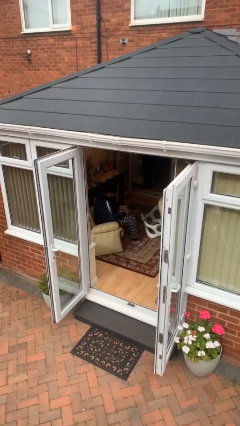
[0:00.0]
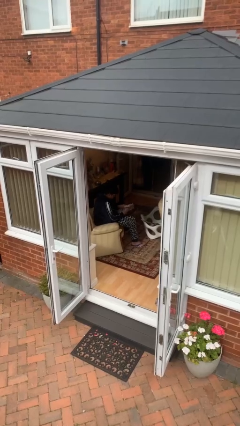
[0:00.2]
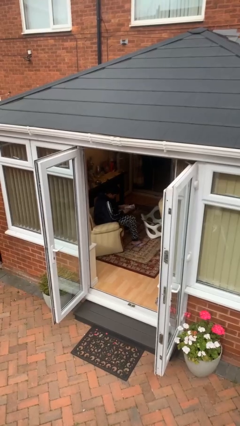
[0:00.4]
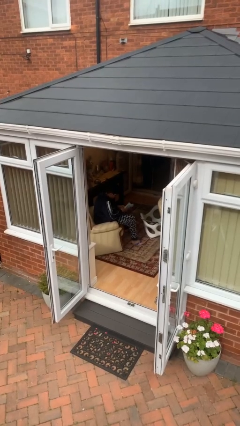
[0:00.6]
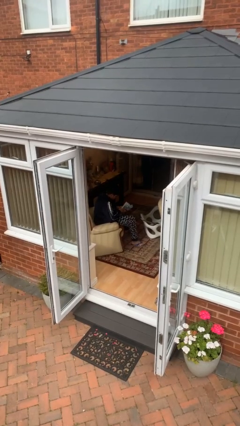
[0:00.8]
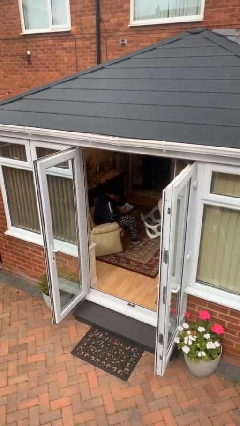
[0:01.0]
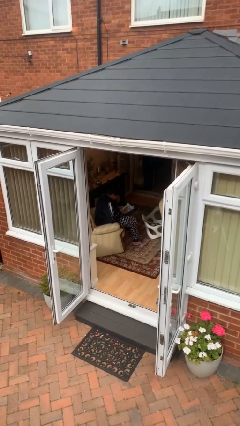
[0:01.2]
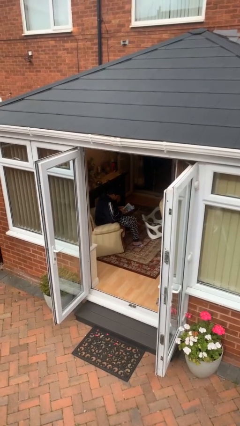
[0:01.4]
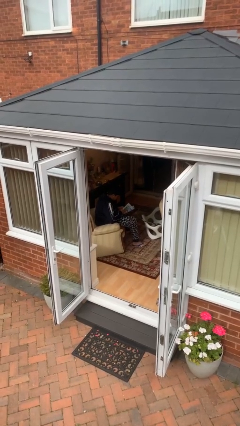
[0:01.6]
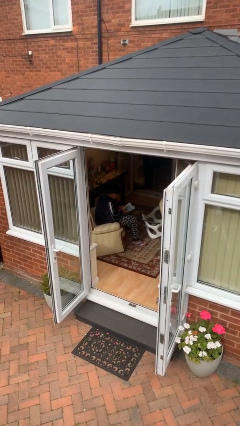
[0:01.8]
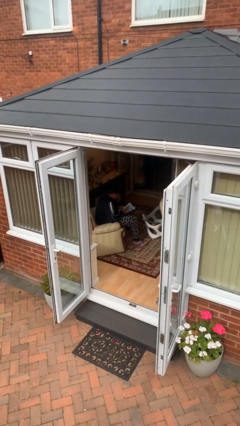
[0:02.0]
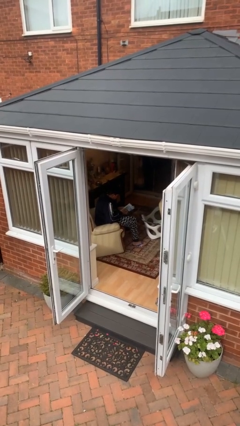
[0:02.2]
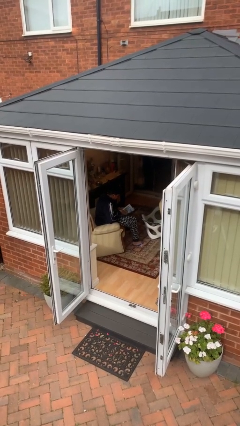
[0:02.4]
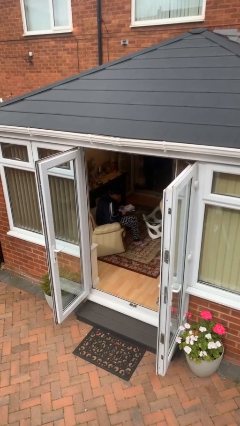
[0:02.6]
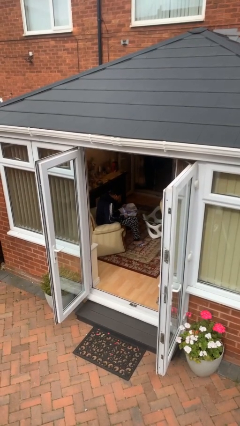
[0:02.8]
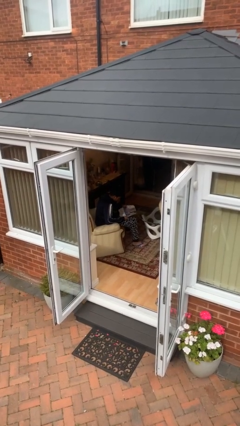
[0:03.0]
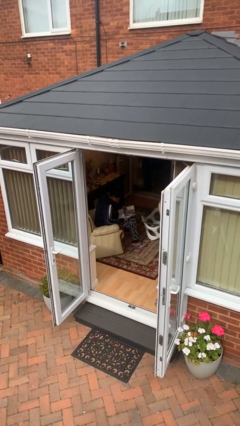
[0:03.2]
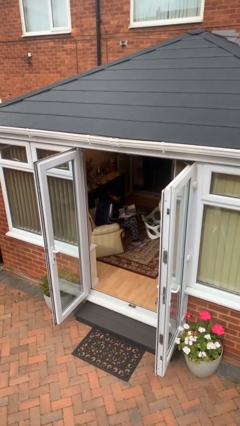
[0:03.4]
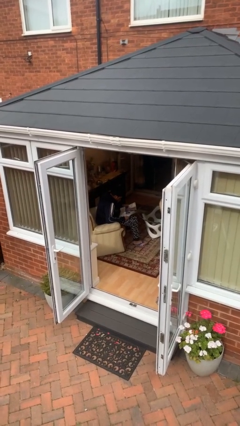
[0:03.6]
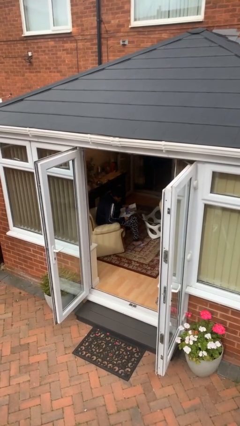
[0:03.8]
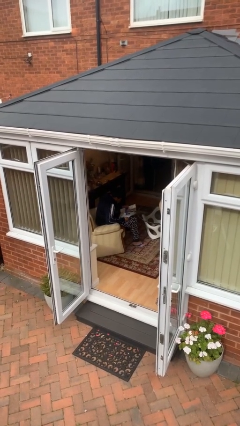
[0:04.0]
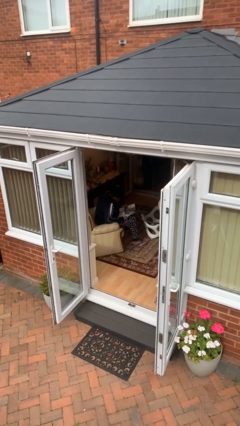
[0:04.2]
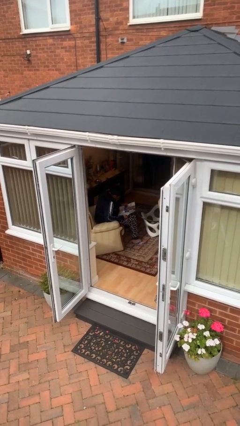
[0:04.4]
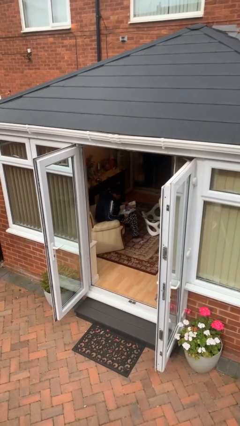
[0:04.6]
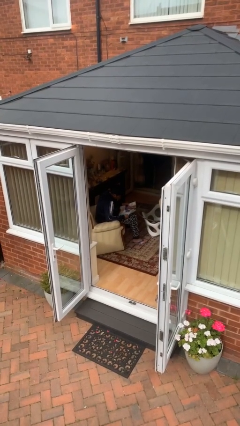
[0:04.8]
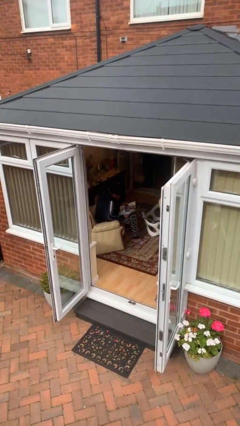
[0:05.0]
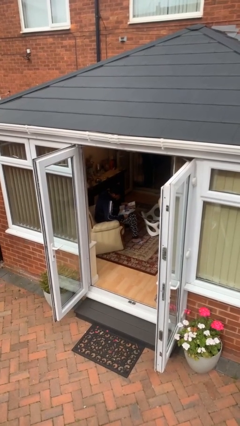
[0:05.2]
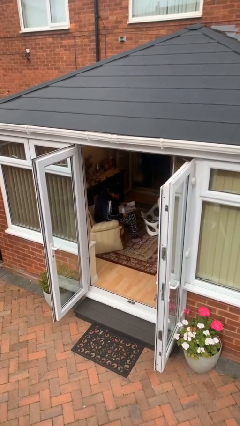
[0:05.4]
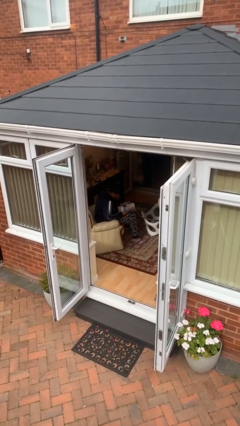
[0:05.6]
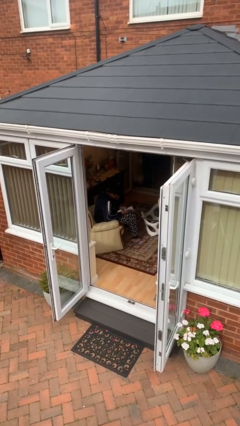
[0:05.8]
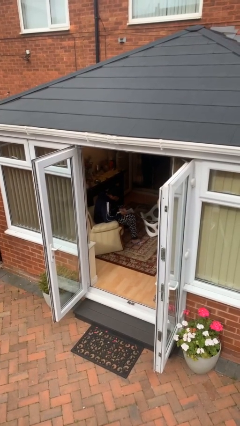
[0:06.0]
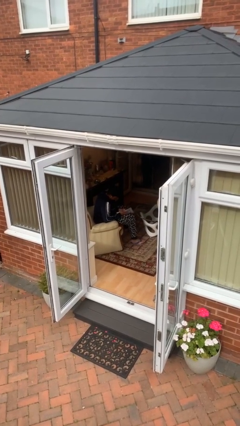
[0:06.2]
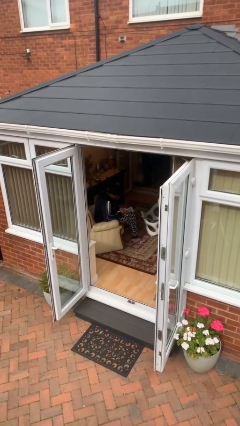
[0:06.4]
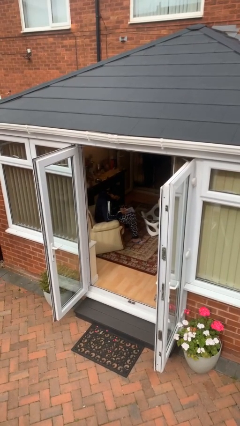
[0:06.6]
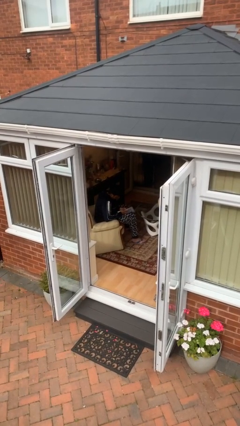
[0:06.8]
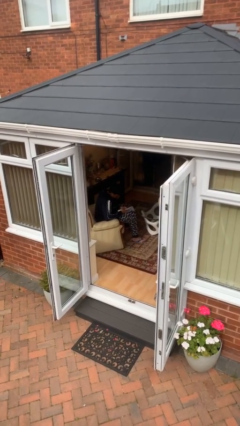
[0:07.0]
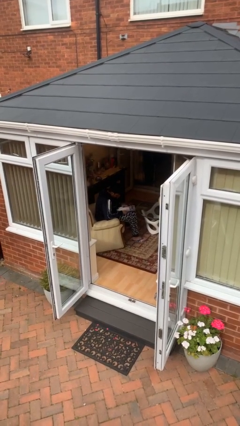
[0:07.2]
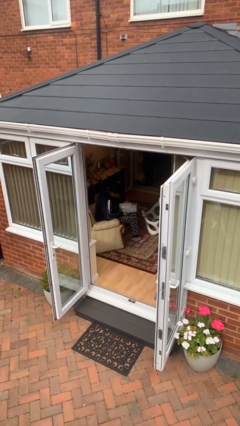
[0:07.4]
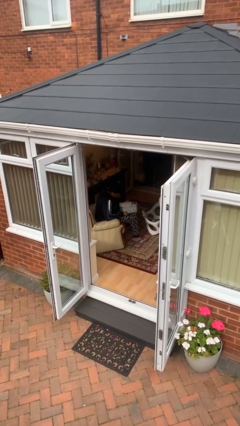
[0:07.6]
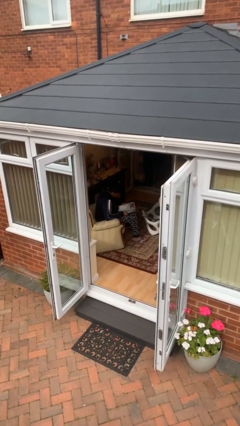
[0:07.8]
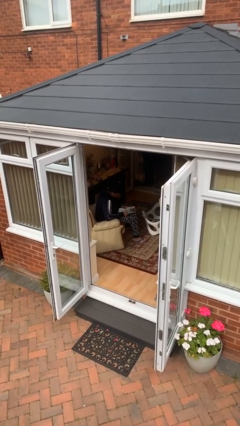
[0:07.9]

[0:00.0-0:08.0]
person reads document

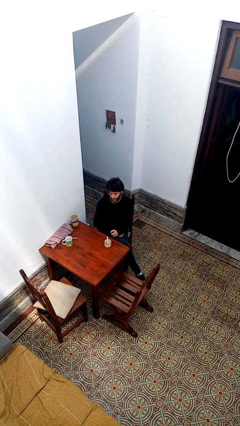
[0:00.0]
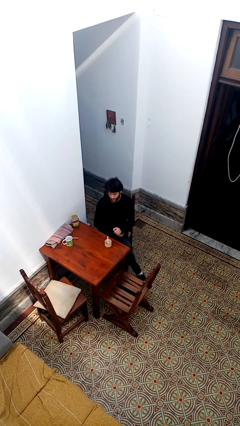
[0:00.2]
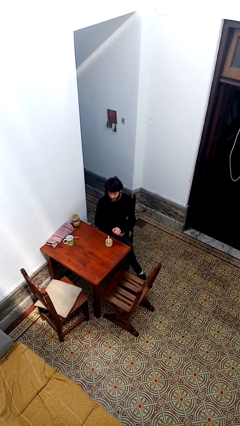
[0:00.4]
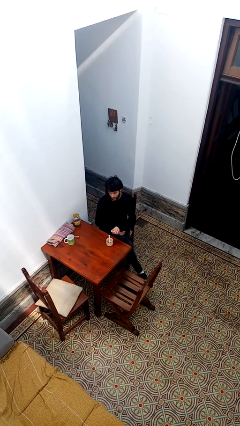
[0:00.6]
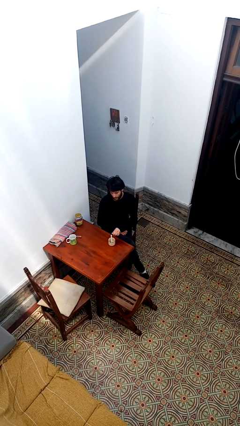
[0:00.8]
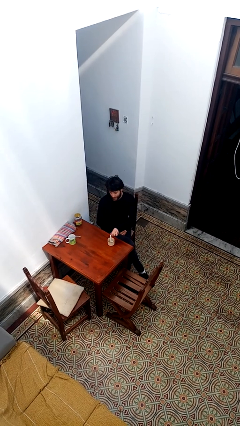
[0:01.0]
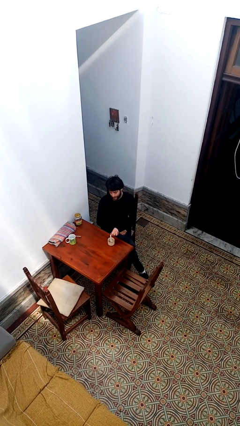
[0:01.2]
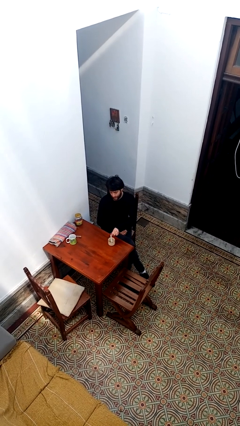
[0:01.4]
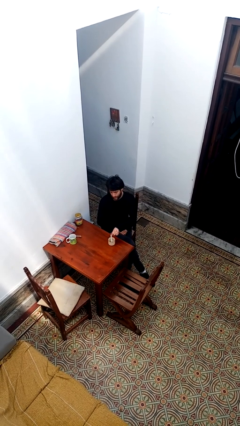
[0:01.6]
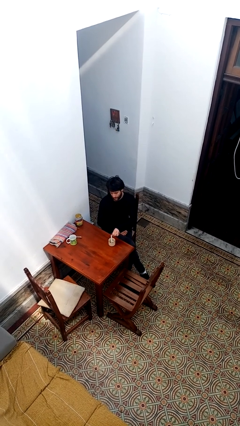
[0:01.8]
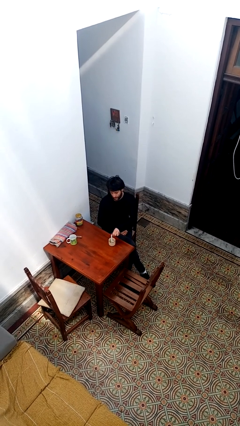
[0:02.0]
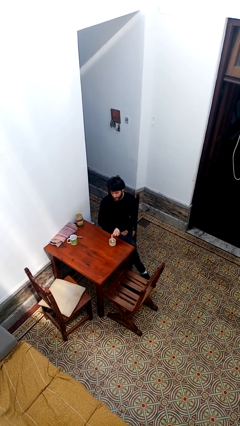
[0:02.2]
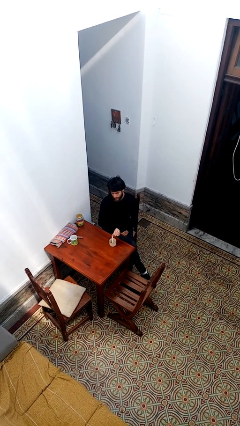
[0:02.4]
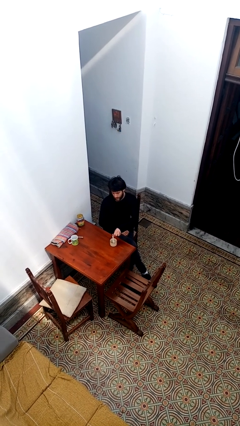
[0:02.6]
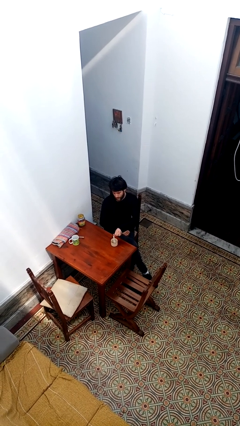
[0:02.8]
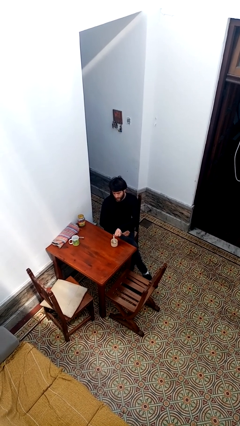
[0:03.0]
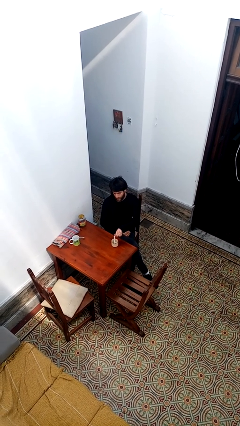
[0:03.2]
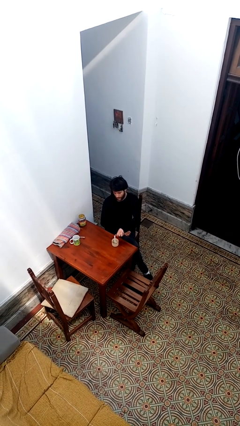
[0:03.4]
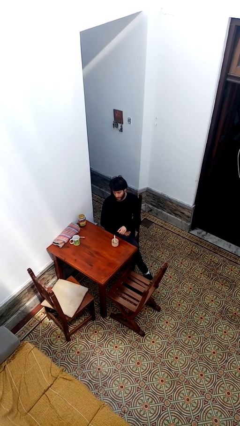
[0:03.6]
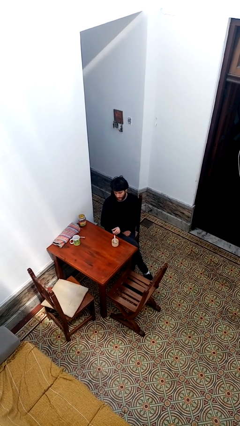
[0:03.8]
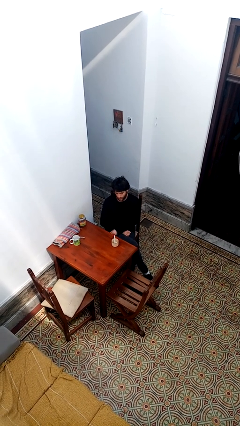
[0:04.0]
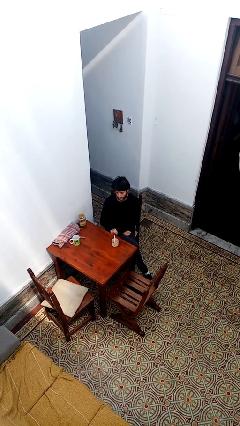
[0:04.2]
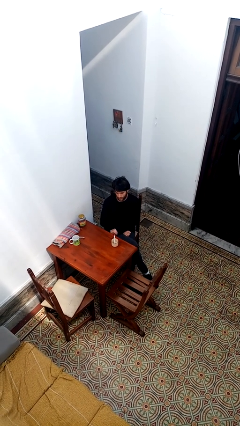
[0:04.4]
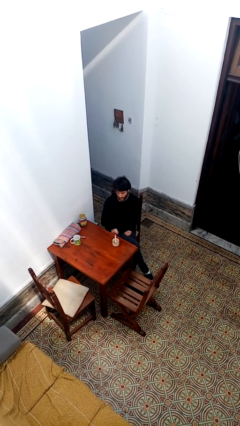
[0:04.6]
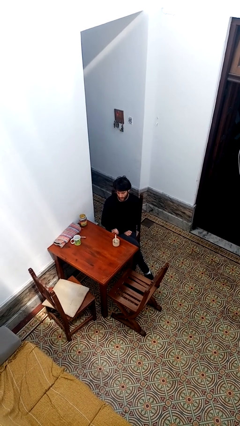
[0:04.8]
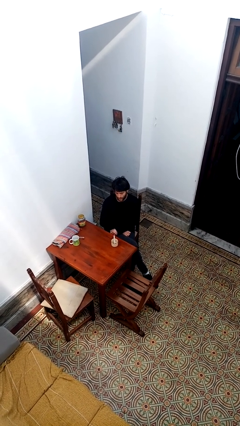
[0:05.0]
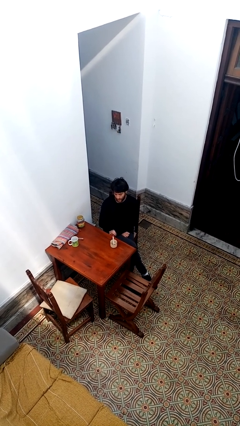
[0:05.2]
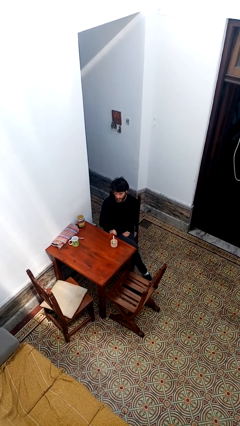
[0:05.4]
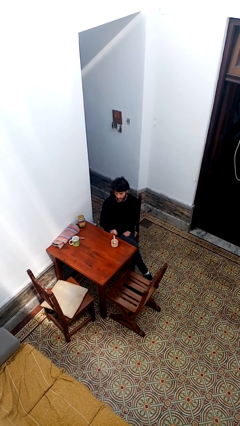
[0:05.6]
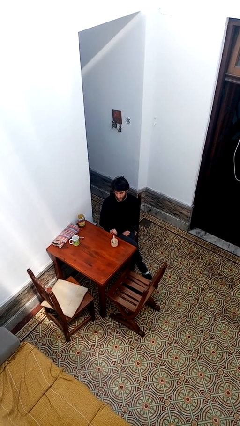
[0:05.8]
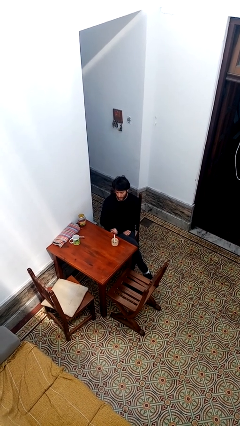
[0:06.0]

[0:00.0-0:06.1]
person lights candle

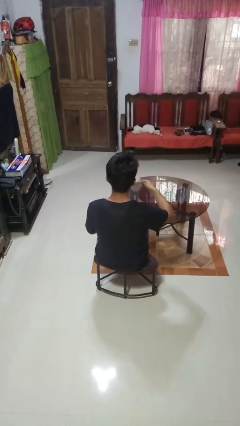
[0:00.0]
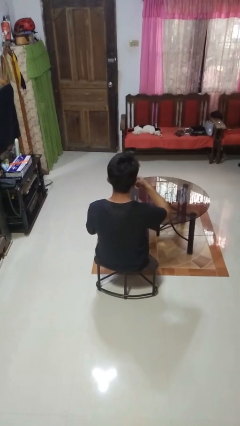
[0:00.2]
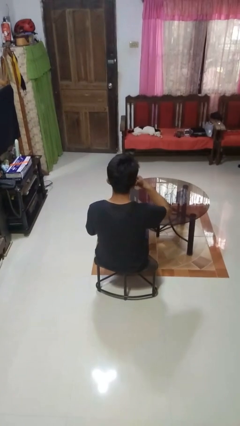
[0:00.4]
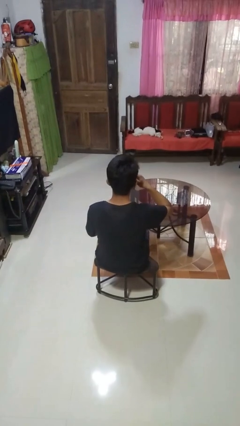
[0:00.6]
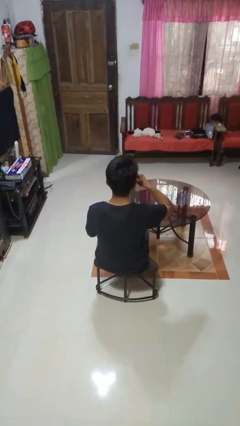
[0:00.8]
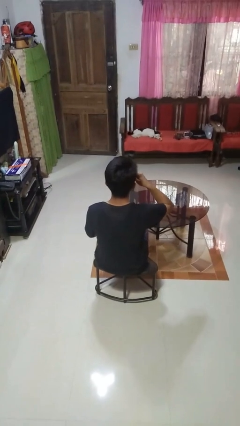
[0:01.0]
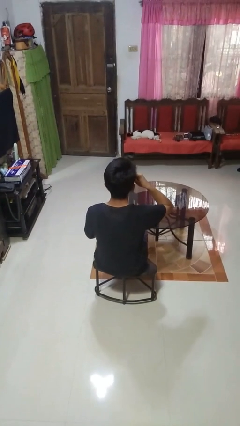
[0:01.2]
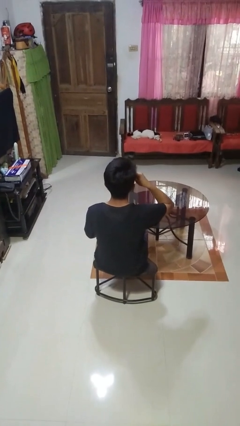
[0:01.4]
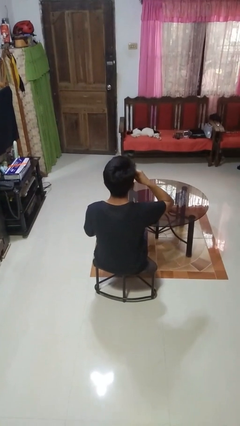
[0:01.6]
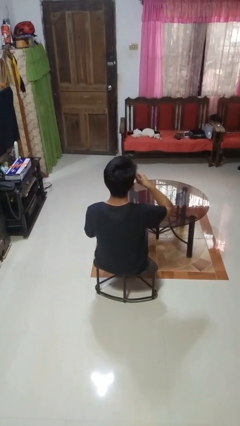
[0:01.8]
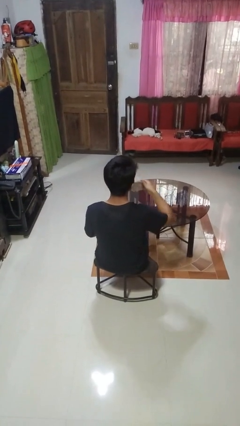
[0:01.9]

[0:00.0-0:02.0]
person drinks from mug

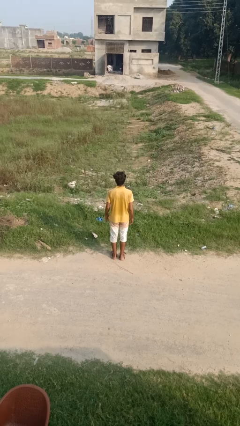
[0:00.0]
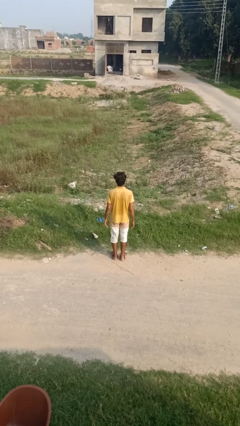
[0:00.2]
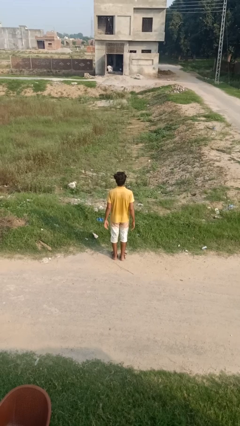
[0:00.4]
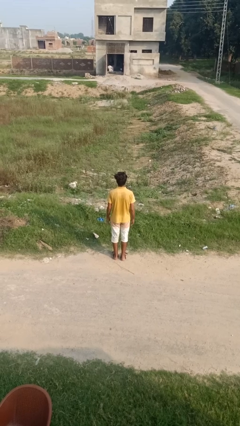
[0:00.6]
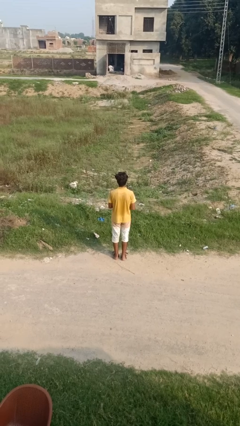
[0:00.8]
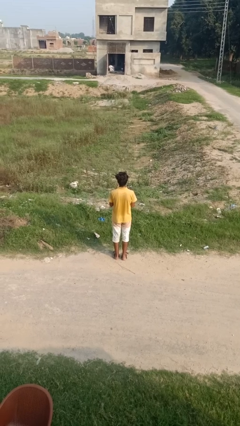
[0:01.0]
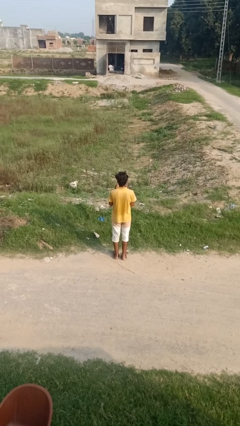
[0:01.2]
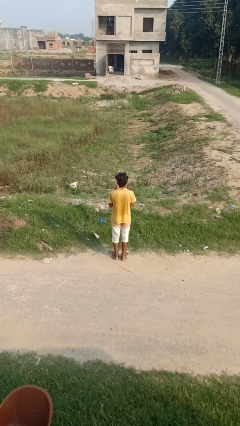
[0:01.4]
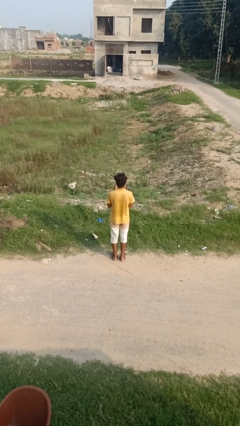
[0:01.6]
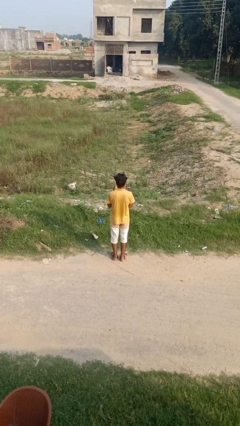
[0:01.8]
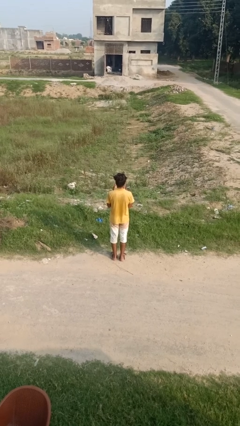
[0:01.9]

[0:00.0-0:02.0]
person prays
